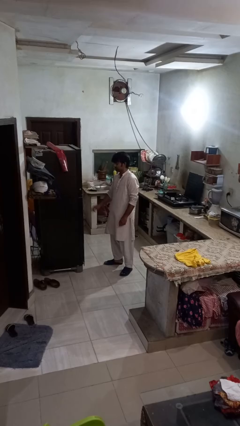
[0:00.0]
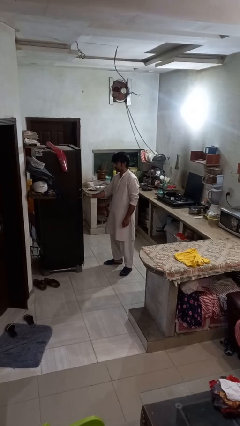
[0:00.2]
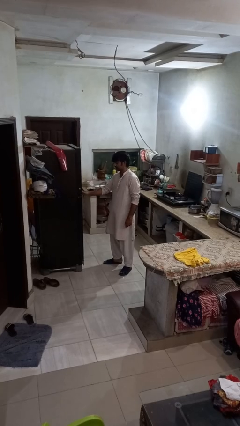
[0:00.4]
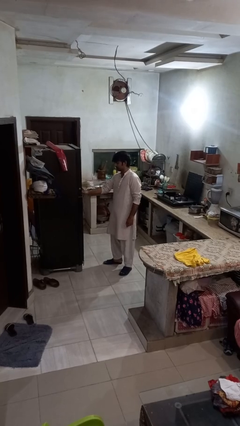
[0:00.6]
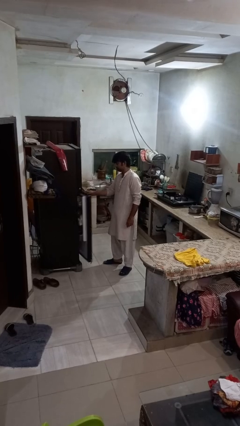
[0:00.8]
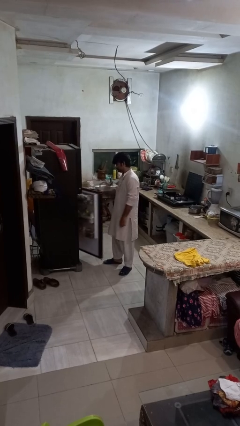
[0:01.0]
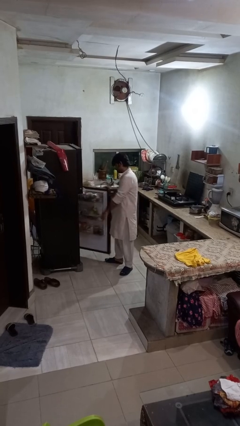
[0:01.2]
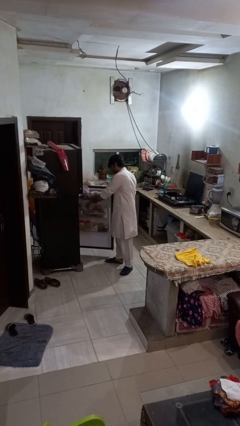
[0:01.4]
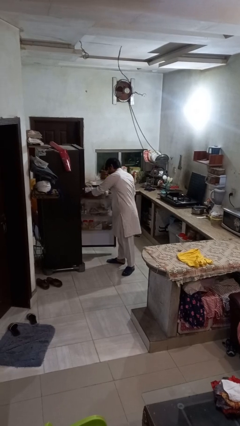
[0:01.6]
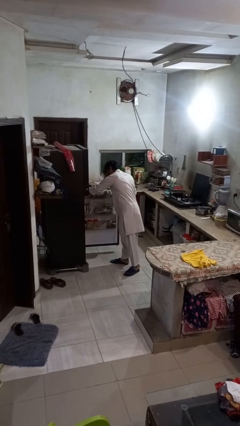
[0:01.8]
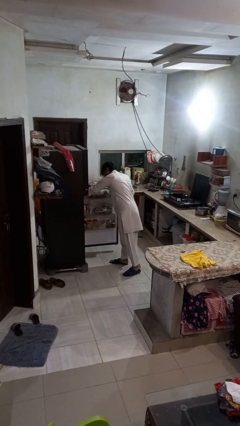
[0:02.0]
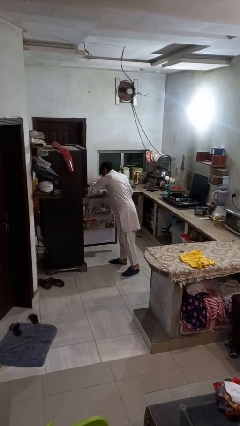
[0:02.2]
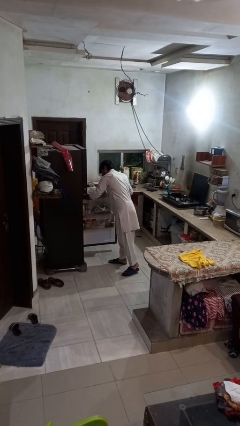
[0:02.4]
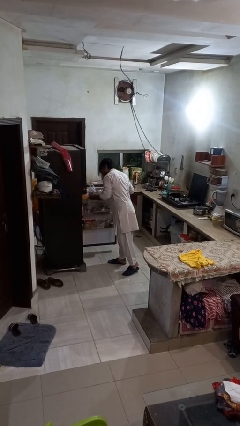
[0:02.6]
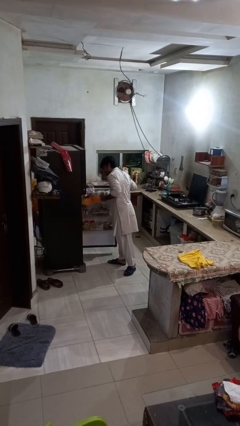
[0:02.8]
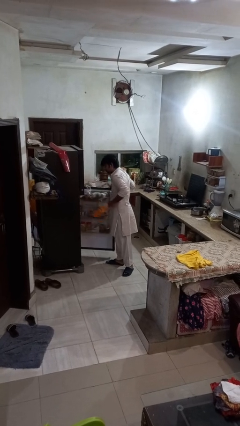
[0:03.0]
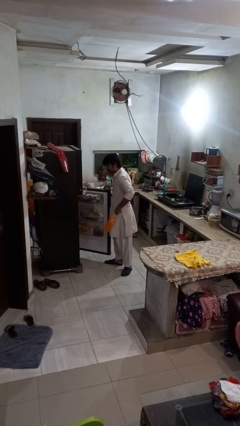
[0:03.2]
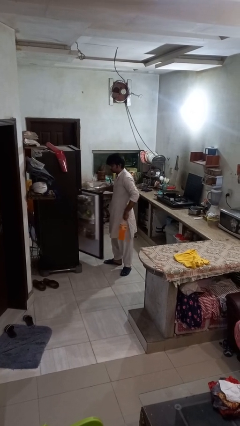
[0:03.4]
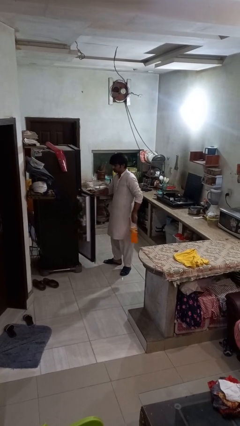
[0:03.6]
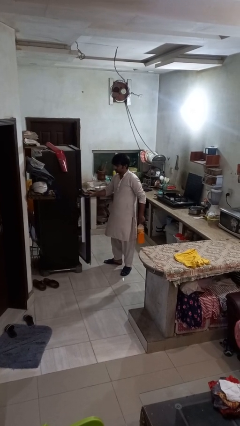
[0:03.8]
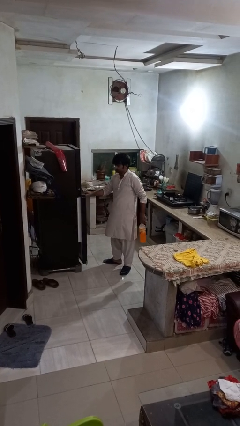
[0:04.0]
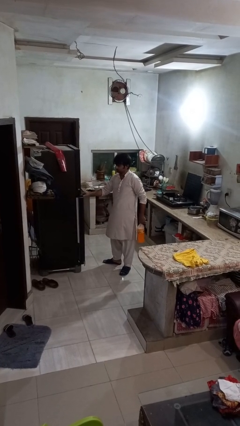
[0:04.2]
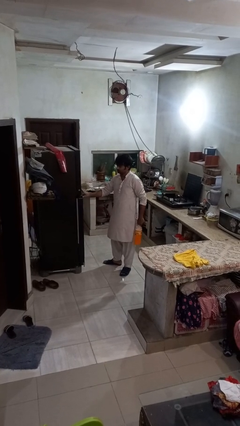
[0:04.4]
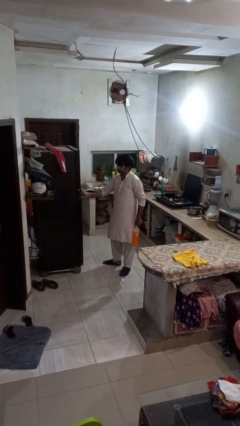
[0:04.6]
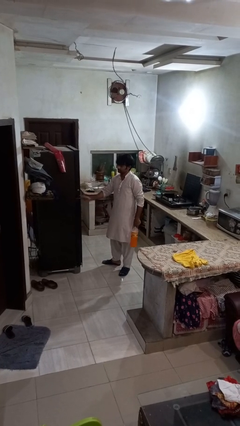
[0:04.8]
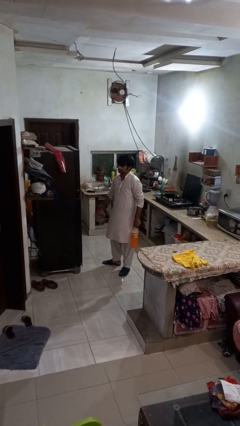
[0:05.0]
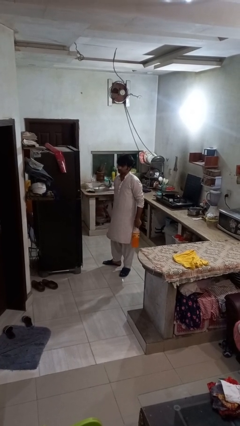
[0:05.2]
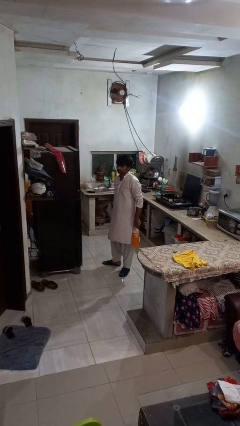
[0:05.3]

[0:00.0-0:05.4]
person takes object from refrigerator

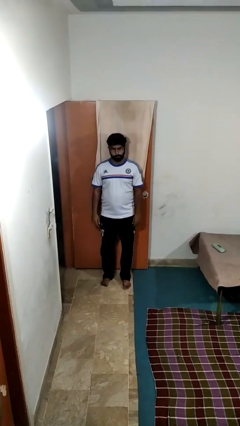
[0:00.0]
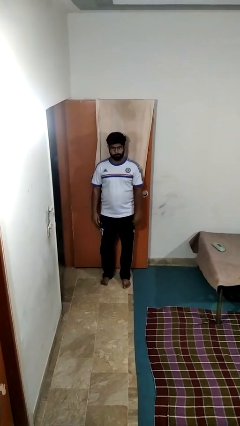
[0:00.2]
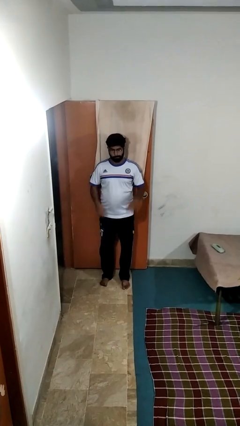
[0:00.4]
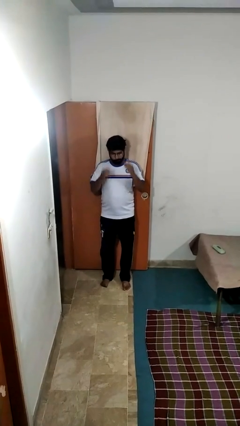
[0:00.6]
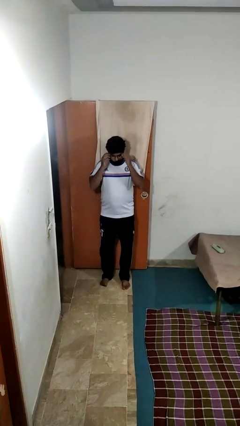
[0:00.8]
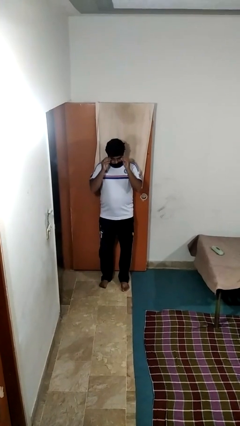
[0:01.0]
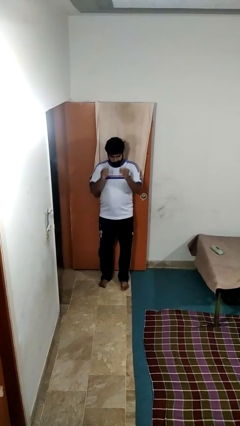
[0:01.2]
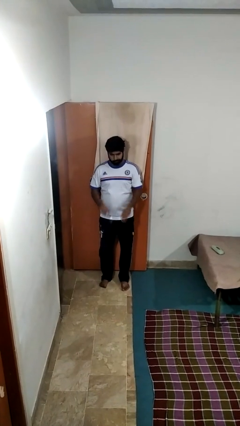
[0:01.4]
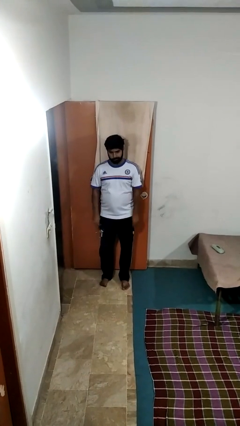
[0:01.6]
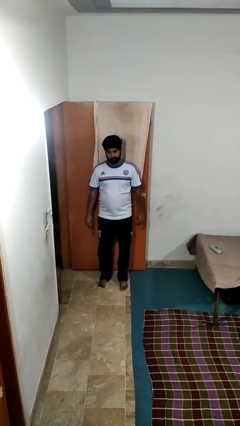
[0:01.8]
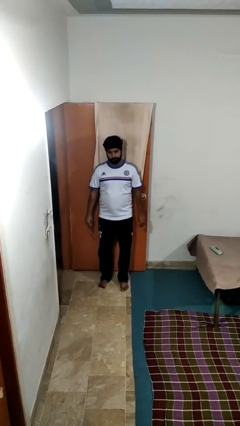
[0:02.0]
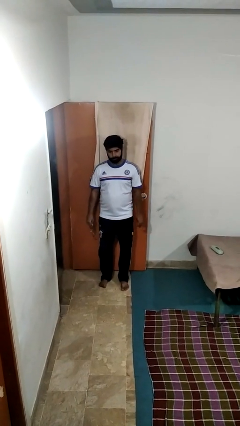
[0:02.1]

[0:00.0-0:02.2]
person takes off glasses

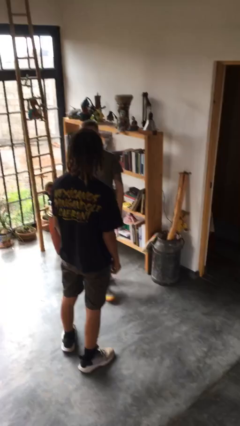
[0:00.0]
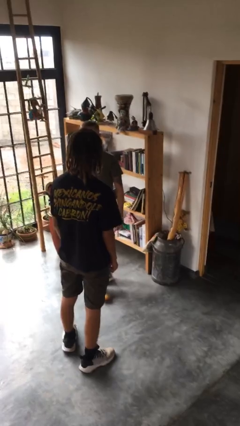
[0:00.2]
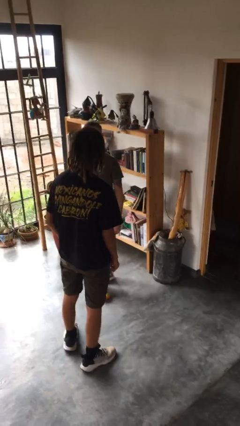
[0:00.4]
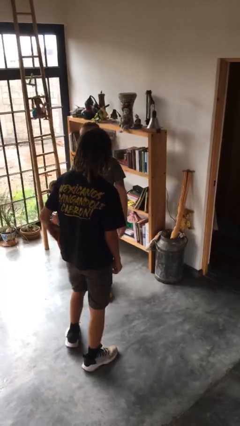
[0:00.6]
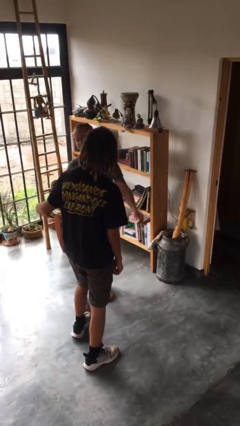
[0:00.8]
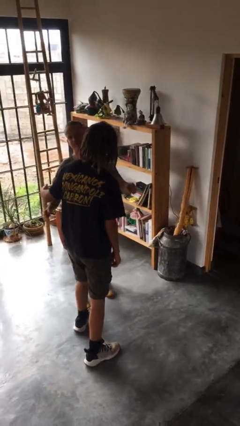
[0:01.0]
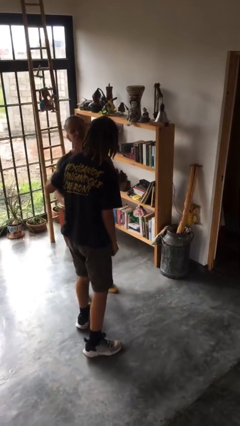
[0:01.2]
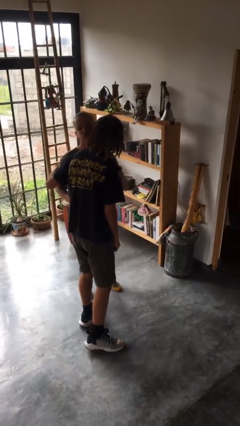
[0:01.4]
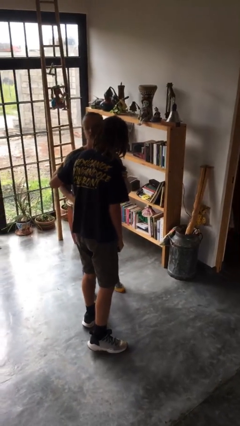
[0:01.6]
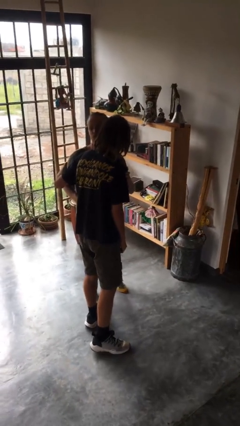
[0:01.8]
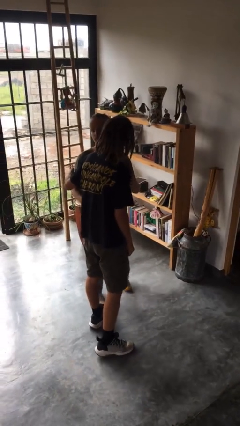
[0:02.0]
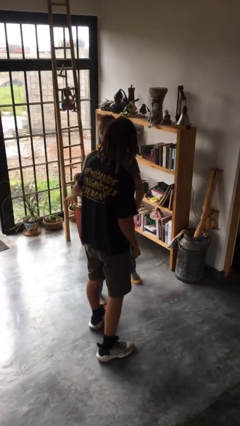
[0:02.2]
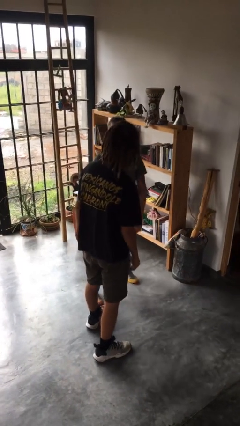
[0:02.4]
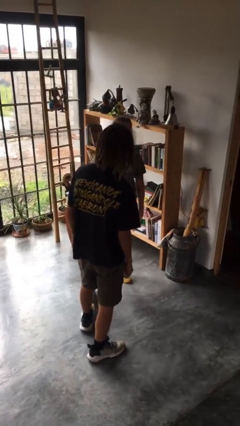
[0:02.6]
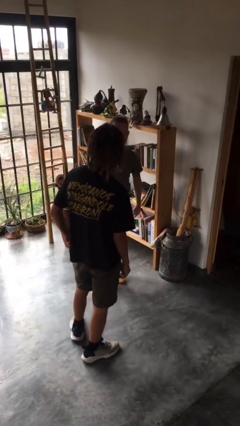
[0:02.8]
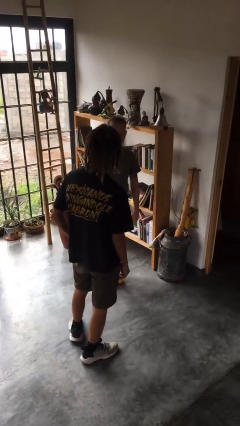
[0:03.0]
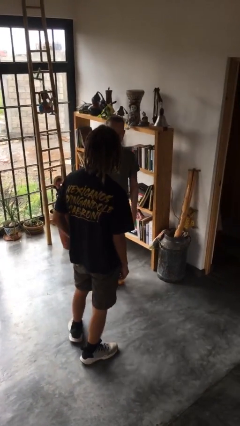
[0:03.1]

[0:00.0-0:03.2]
person kisses cheek of person

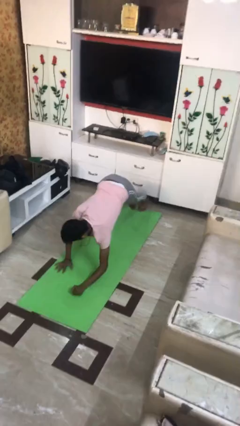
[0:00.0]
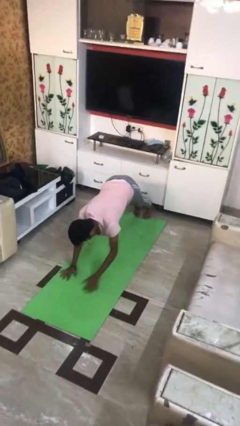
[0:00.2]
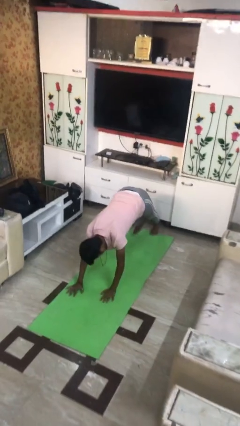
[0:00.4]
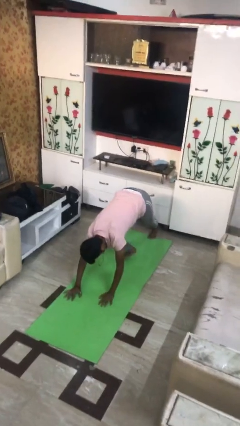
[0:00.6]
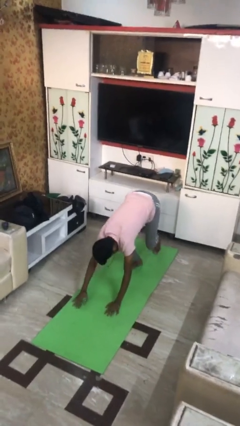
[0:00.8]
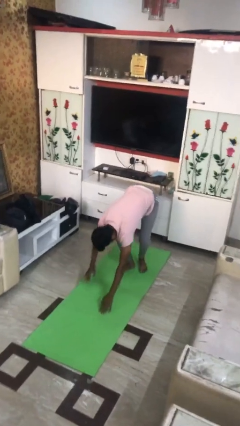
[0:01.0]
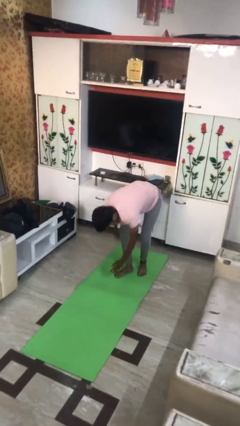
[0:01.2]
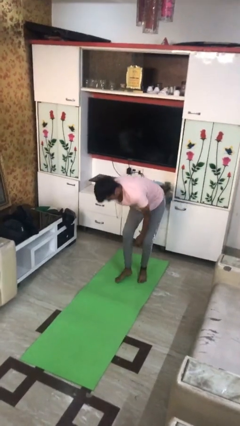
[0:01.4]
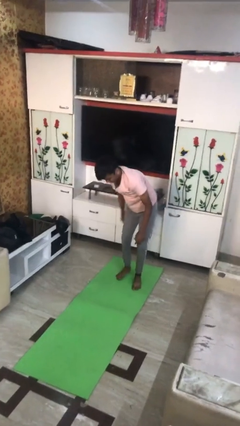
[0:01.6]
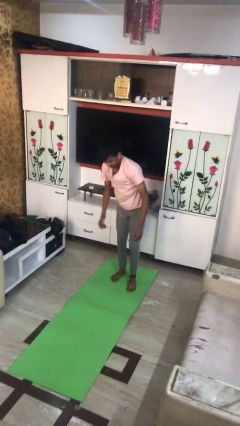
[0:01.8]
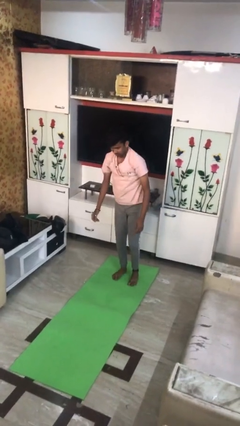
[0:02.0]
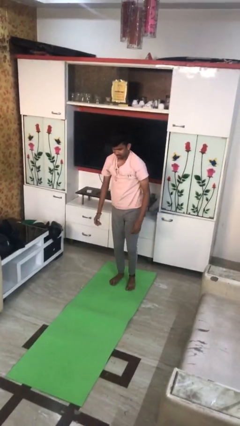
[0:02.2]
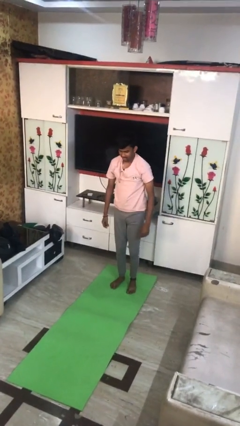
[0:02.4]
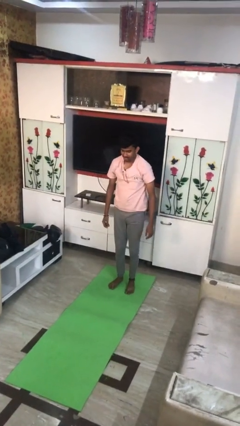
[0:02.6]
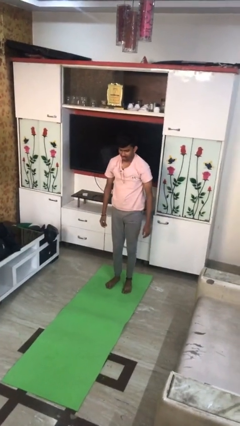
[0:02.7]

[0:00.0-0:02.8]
person stands up from floor

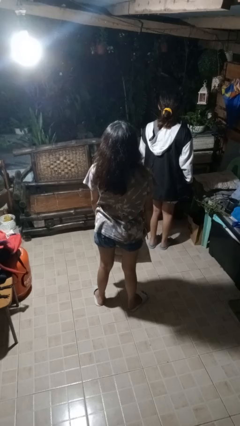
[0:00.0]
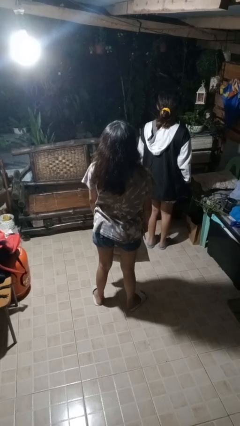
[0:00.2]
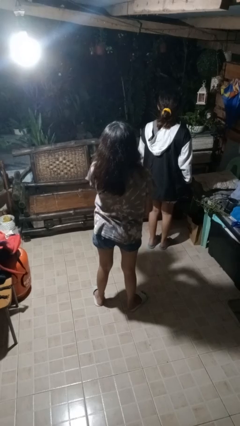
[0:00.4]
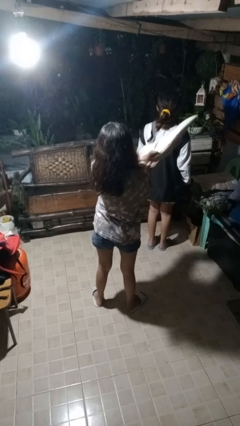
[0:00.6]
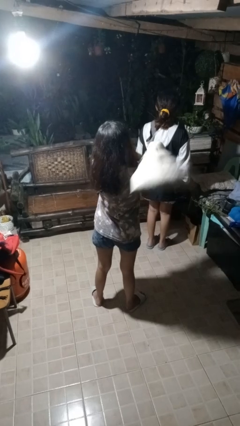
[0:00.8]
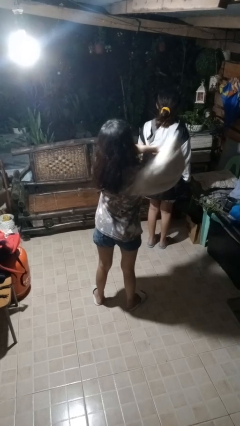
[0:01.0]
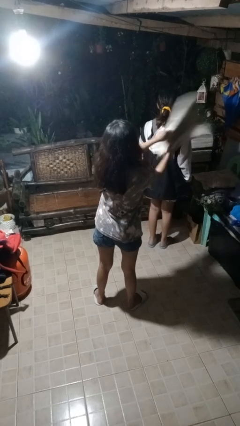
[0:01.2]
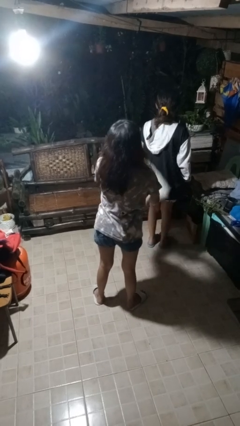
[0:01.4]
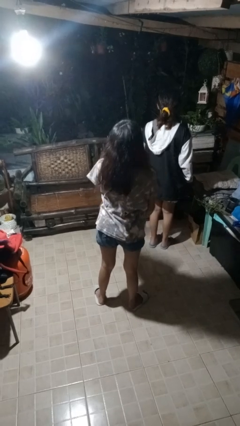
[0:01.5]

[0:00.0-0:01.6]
person hits person with pillow

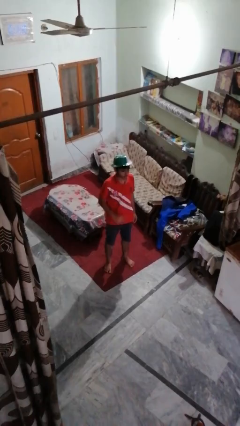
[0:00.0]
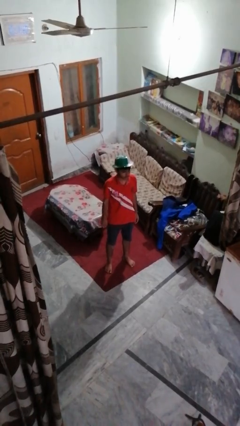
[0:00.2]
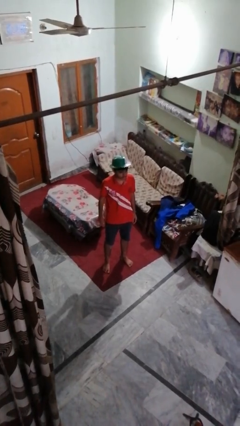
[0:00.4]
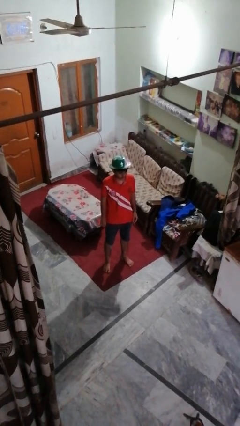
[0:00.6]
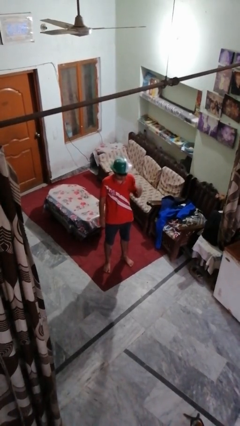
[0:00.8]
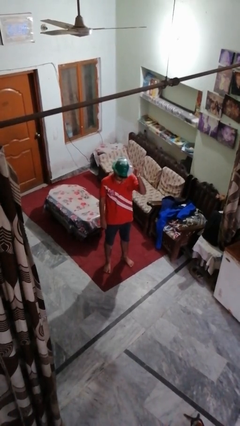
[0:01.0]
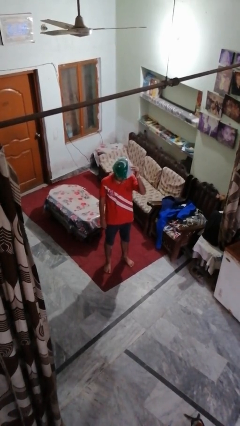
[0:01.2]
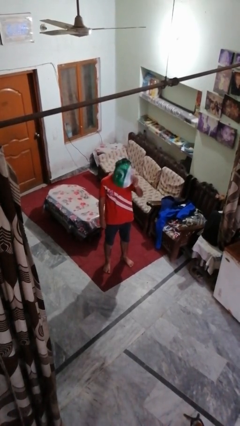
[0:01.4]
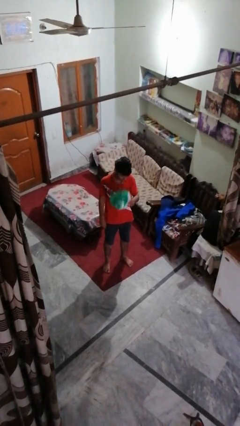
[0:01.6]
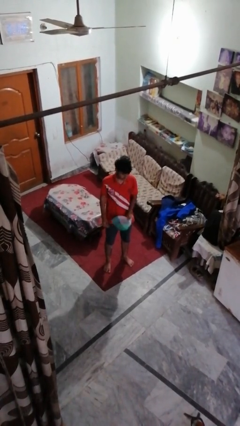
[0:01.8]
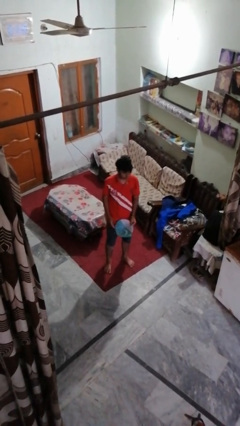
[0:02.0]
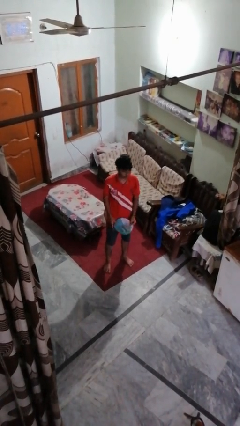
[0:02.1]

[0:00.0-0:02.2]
person takes off hat
